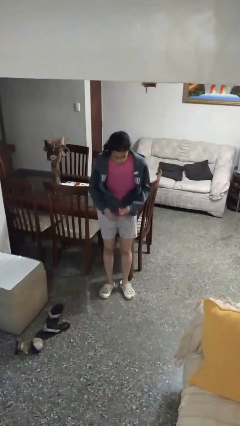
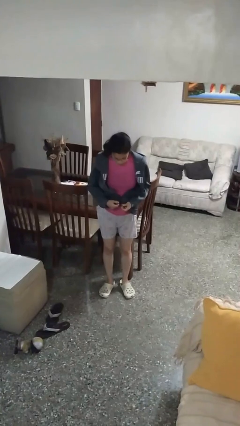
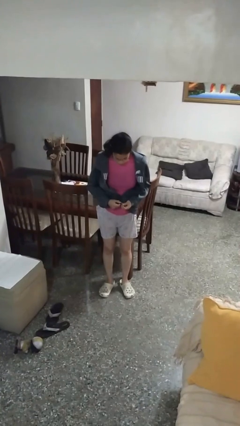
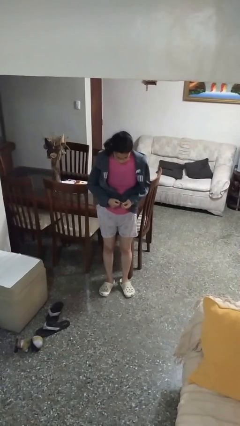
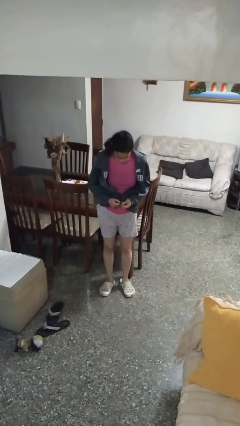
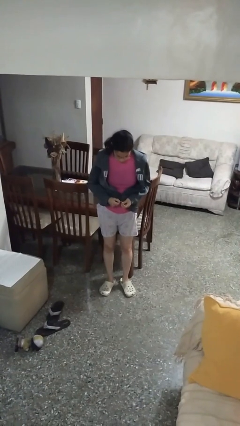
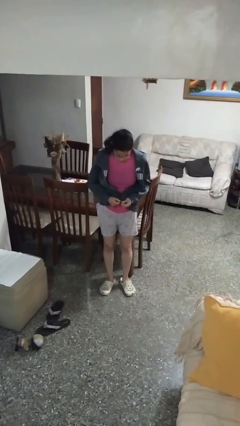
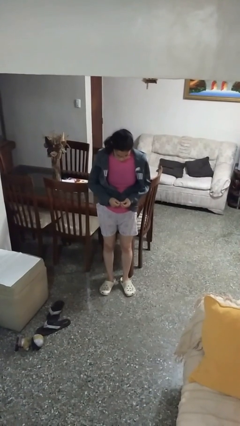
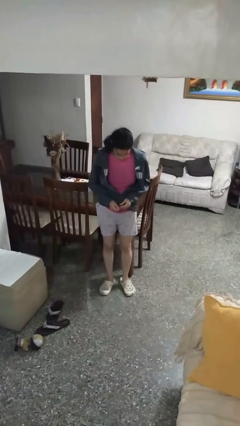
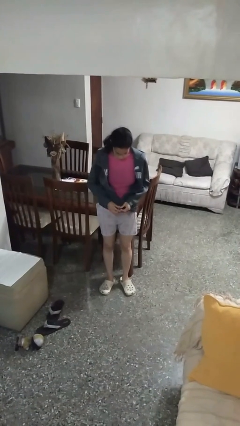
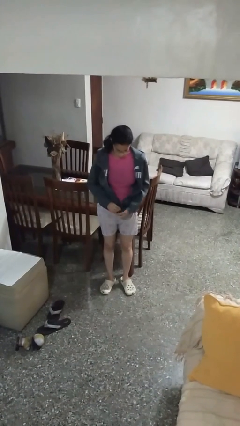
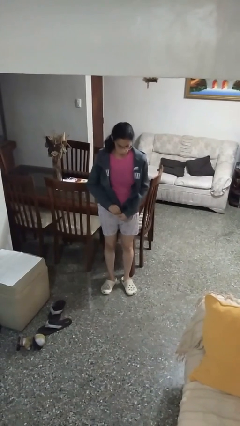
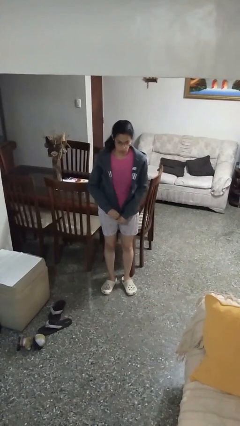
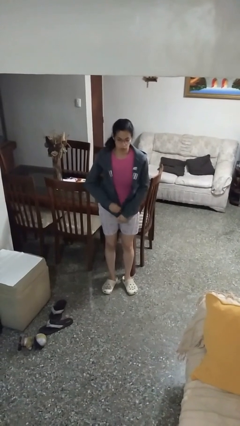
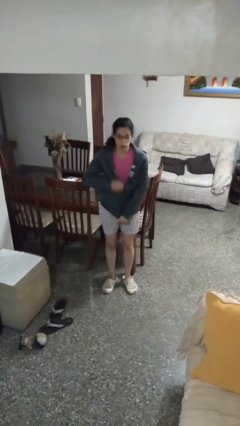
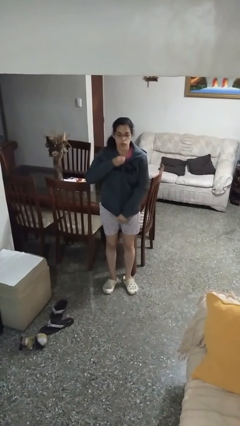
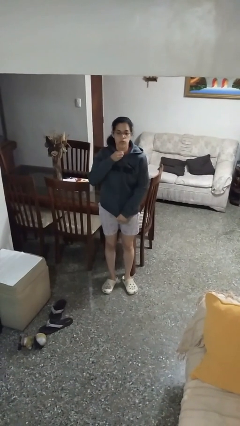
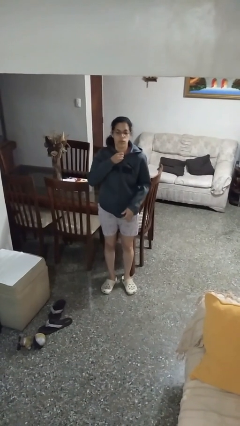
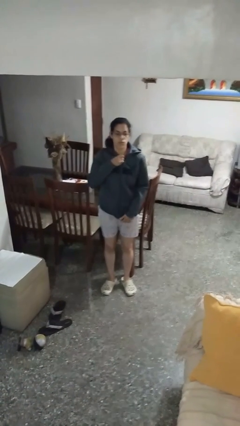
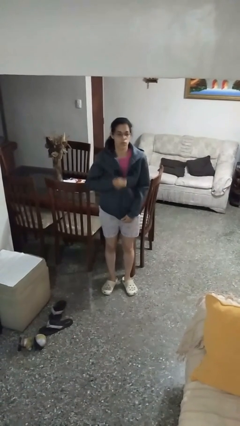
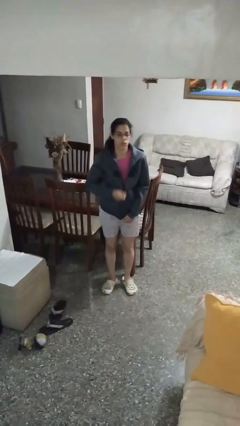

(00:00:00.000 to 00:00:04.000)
person zips up jacket

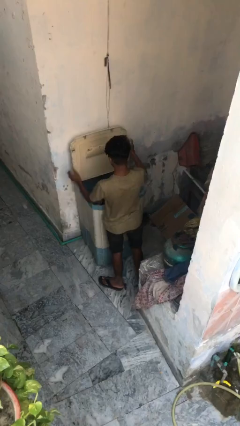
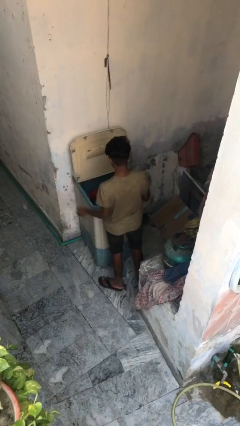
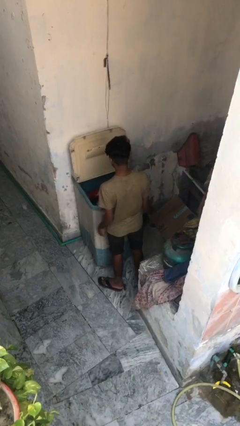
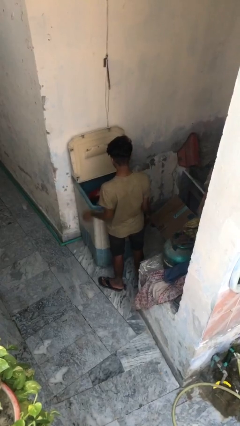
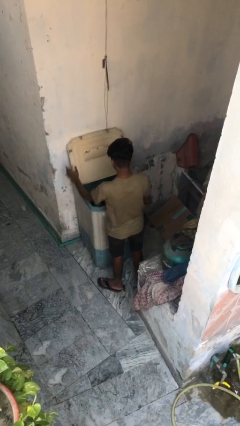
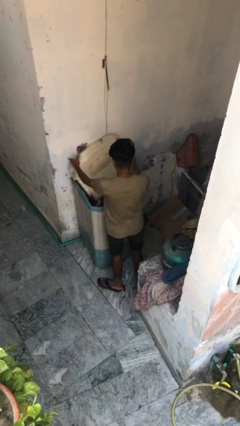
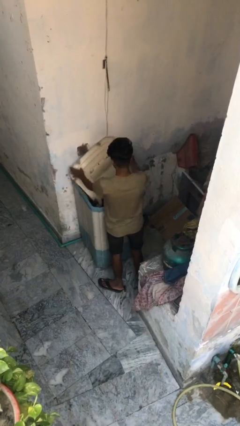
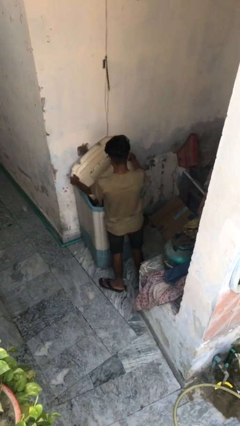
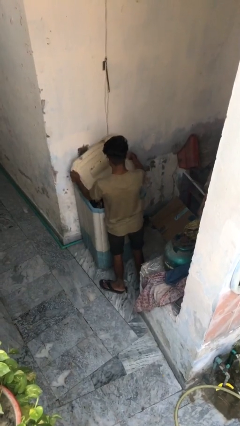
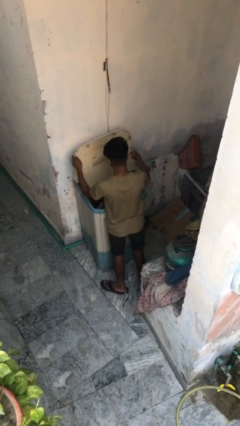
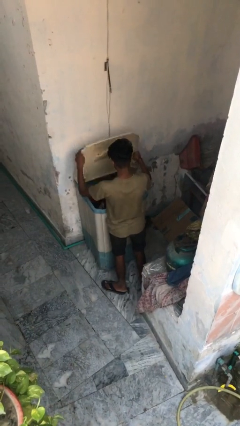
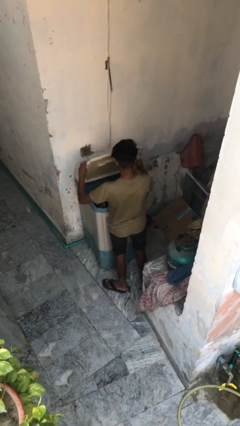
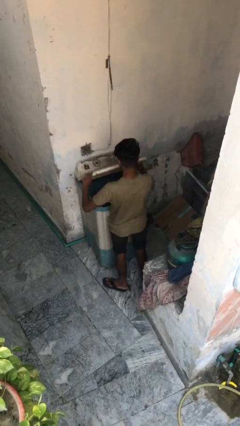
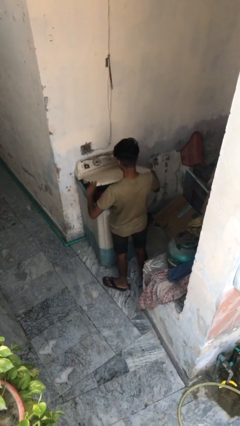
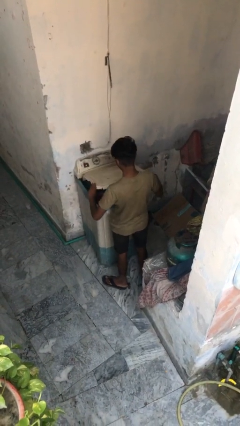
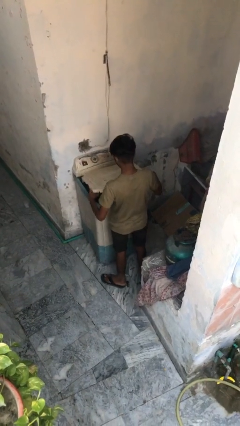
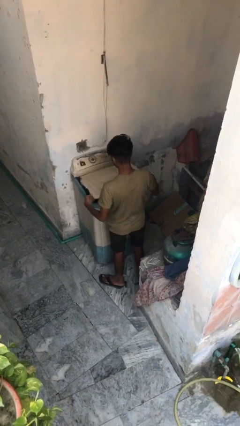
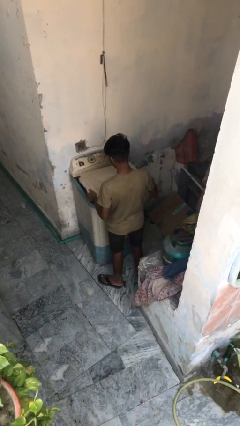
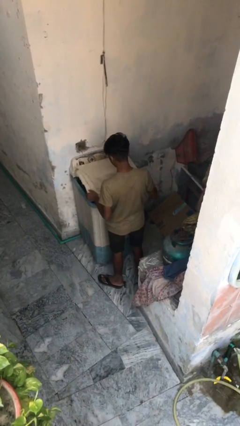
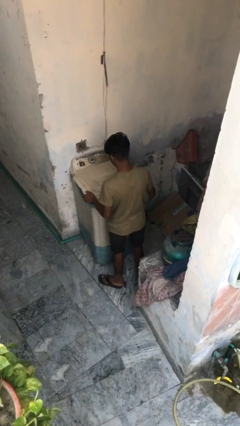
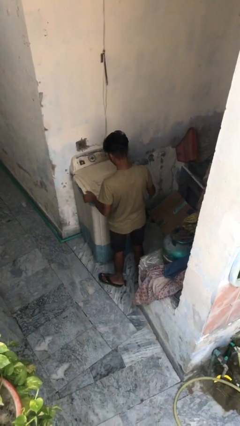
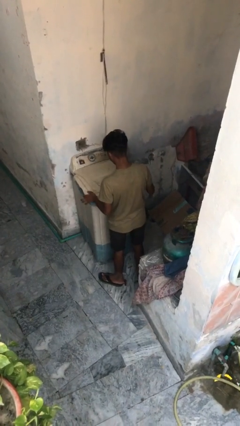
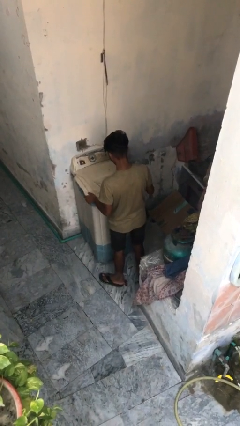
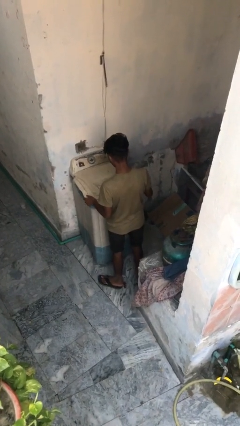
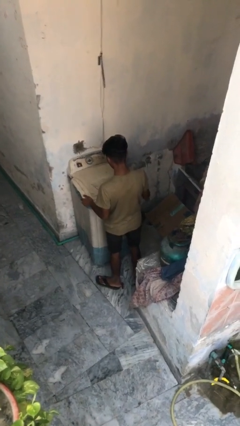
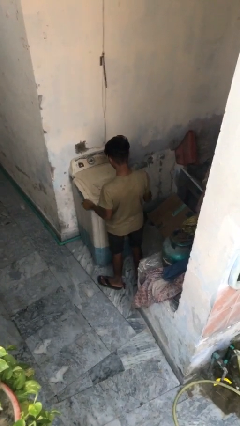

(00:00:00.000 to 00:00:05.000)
person closes clothes washer

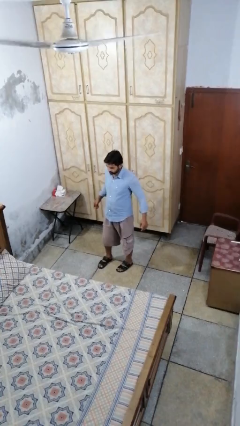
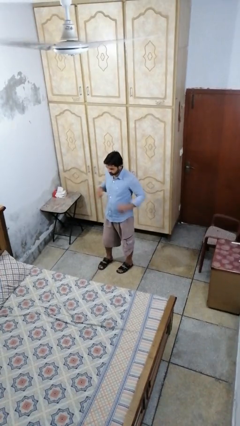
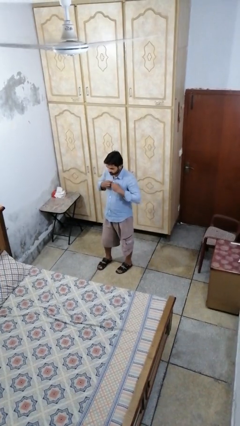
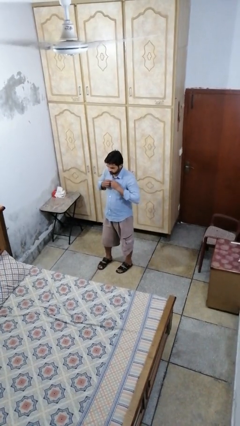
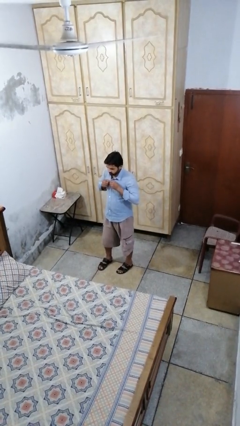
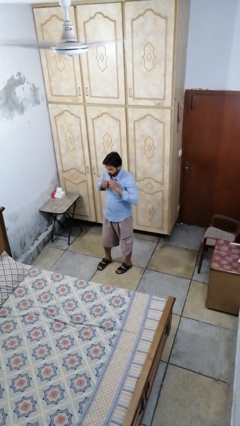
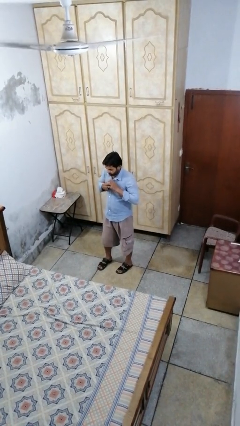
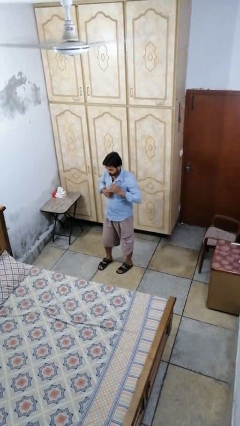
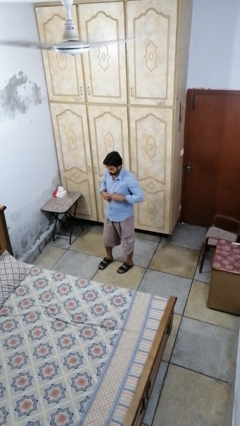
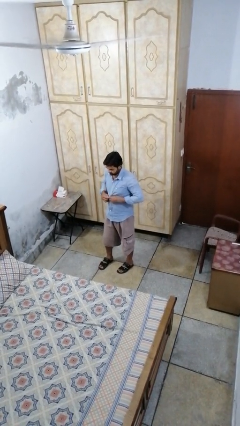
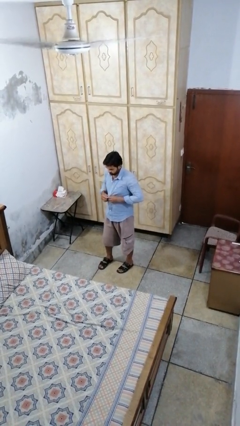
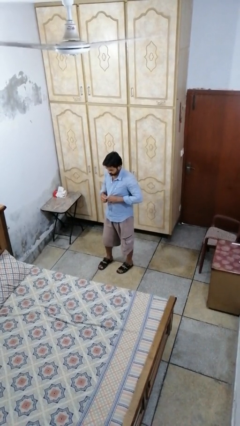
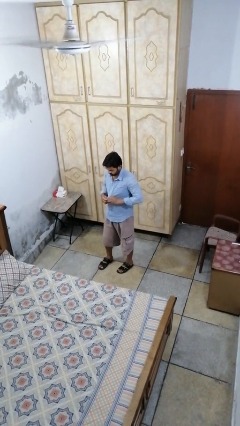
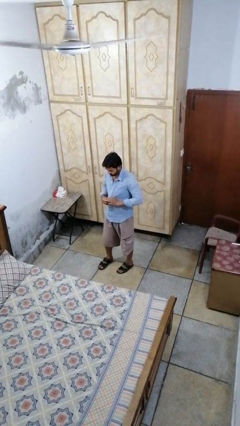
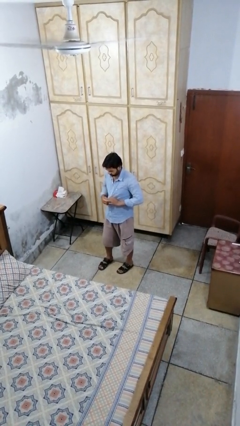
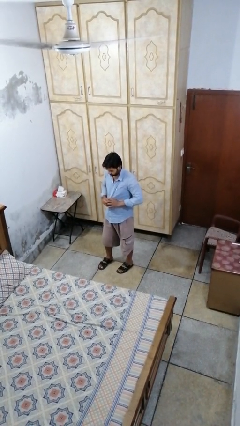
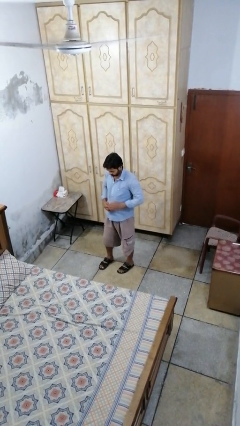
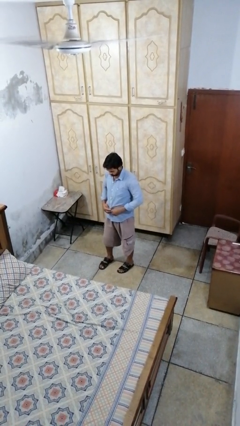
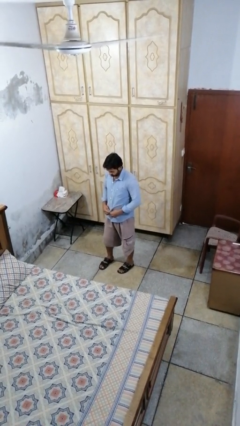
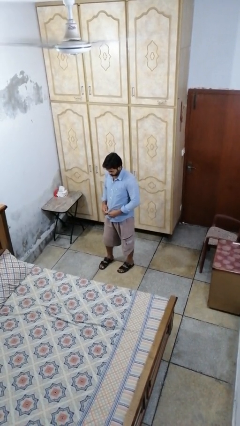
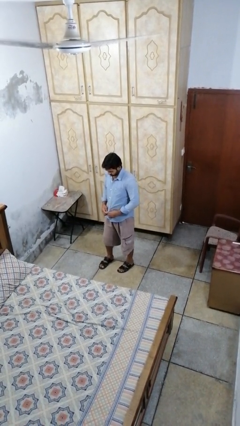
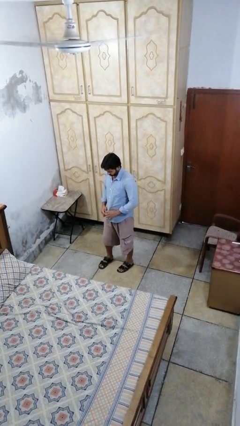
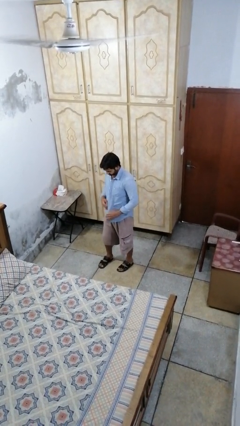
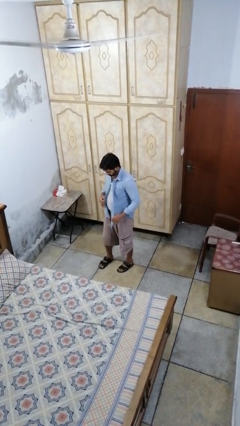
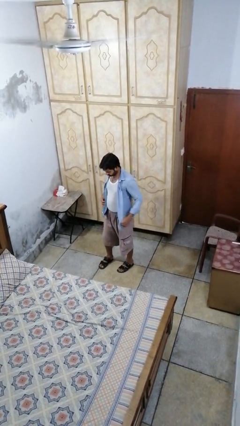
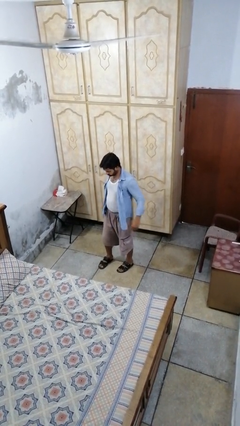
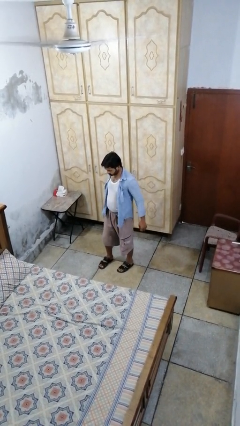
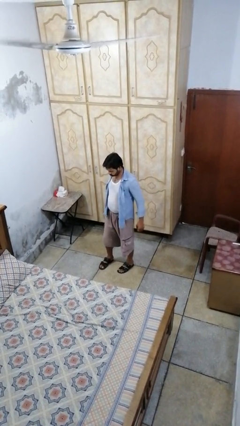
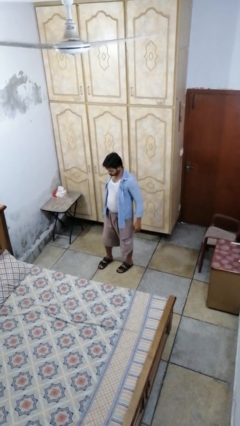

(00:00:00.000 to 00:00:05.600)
person unbuttons shirt

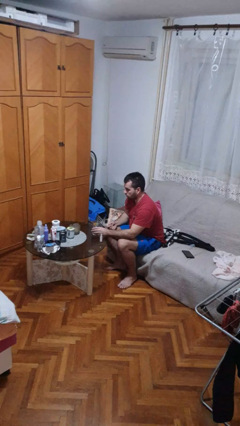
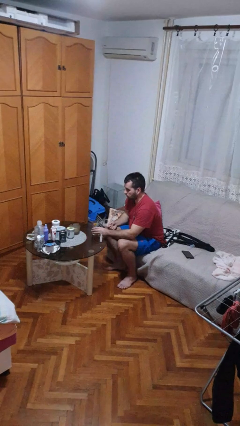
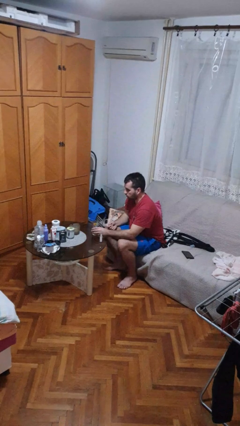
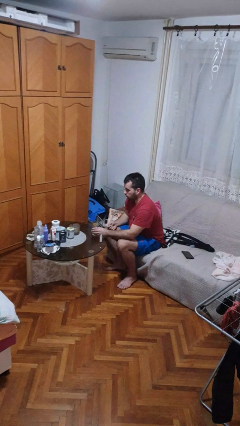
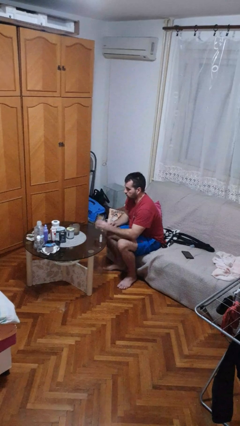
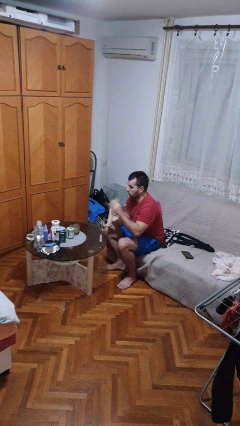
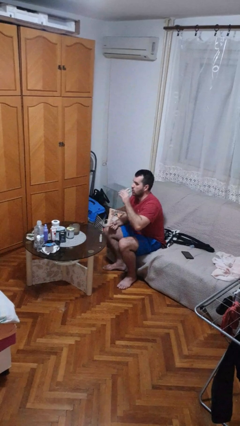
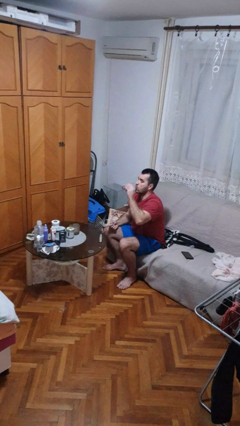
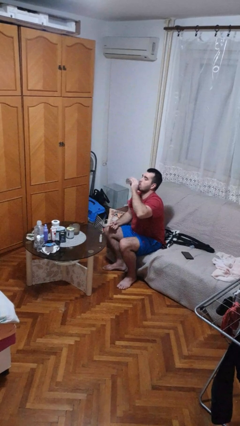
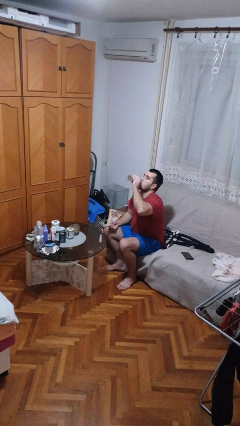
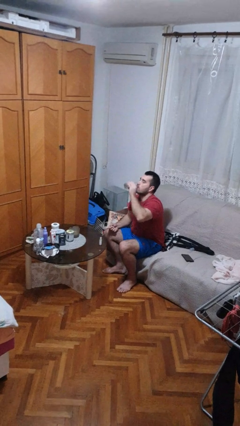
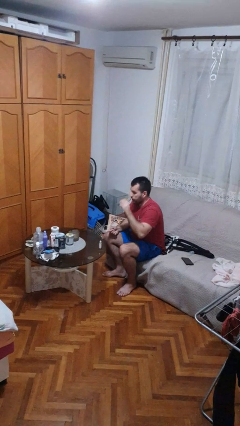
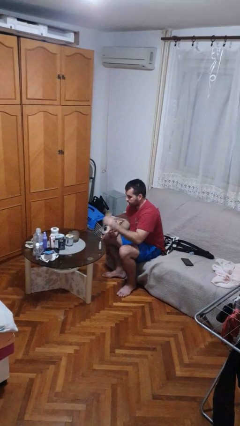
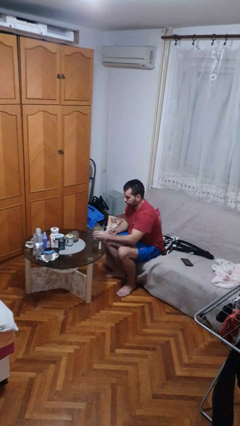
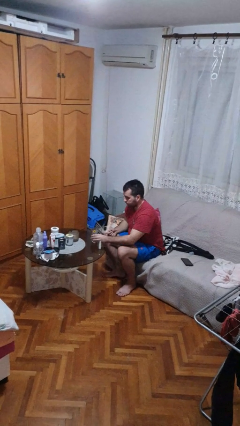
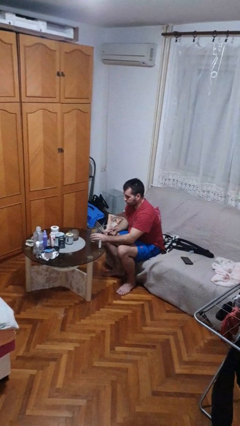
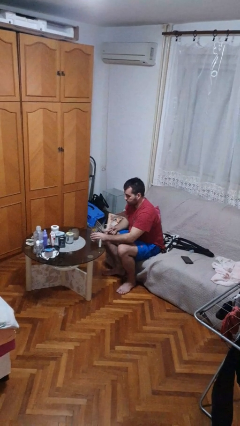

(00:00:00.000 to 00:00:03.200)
person drinks from cup

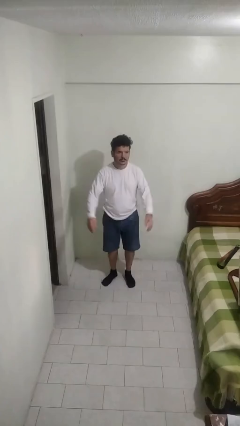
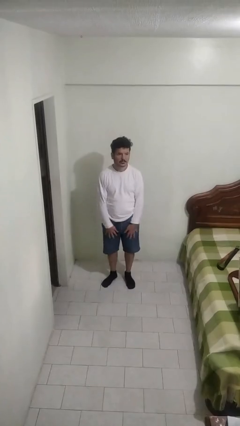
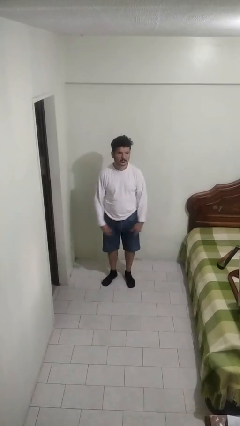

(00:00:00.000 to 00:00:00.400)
person slaps hands on thighs
